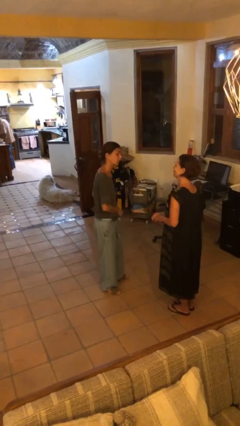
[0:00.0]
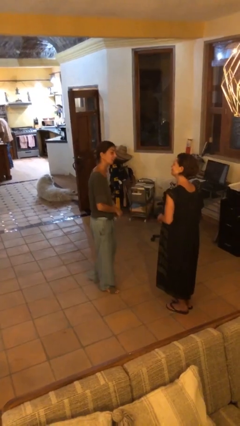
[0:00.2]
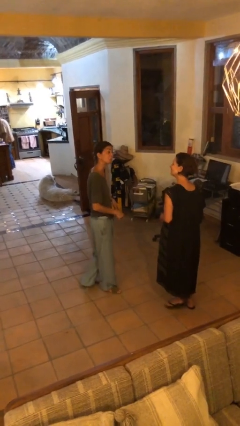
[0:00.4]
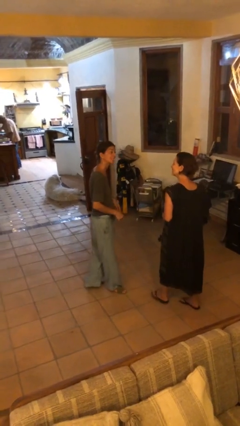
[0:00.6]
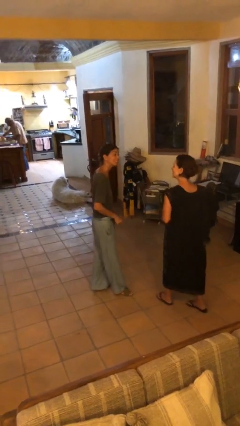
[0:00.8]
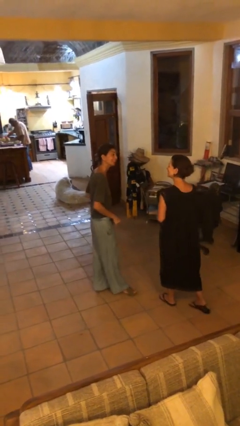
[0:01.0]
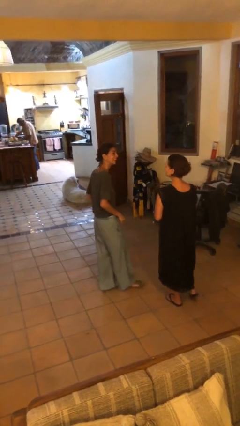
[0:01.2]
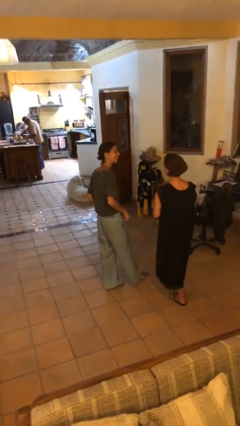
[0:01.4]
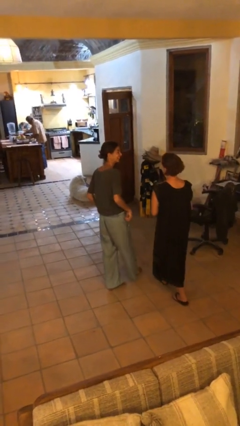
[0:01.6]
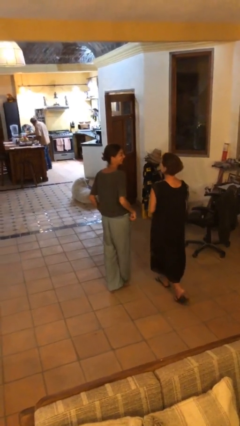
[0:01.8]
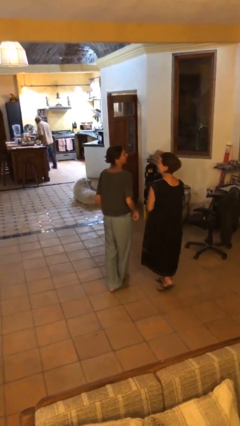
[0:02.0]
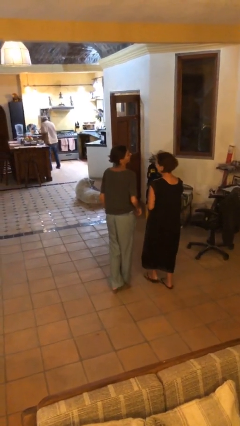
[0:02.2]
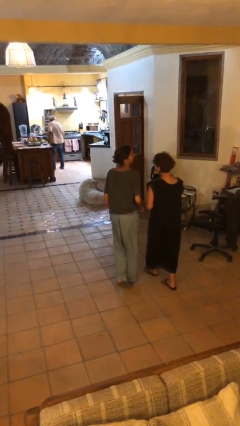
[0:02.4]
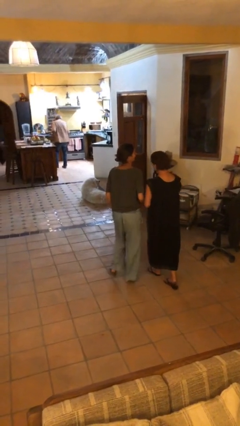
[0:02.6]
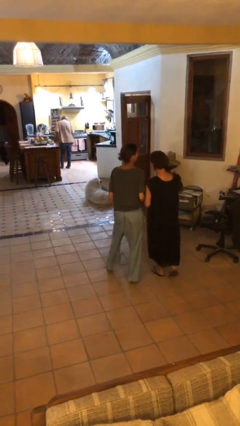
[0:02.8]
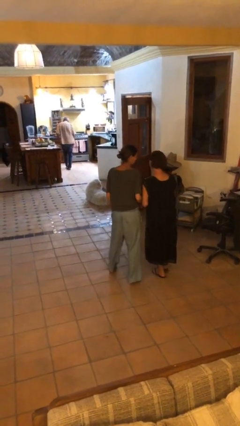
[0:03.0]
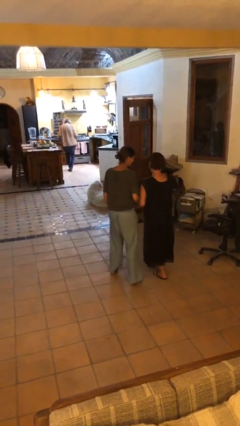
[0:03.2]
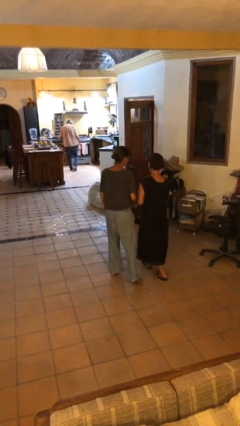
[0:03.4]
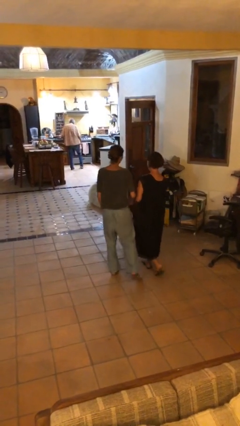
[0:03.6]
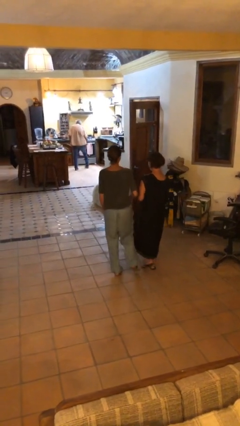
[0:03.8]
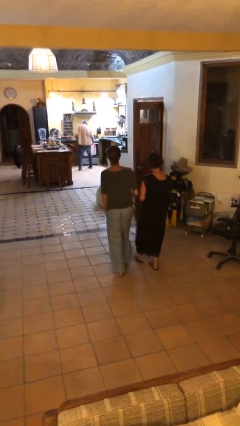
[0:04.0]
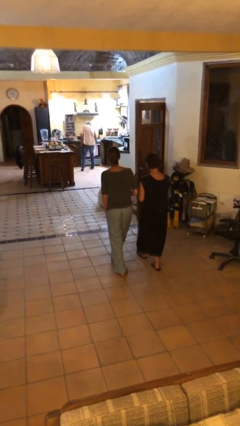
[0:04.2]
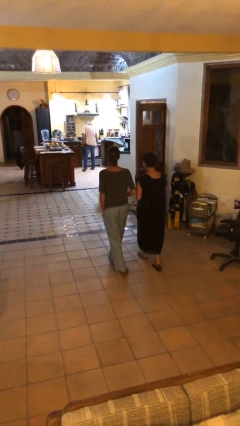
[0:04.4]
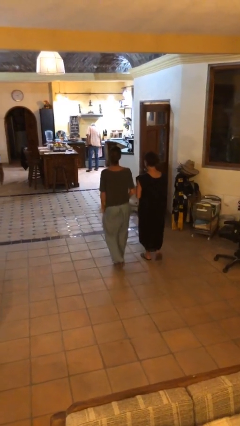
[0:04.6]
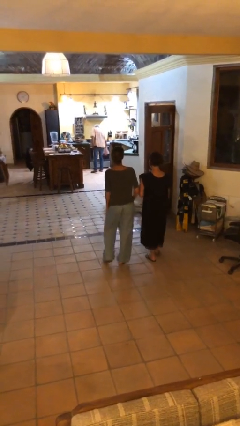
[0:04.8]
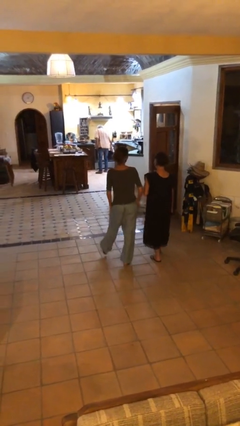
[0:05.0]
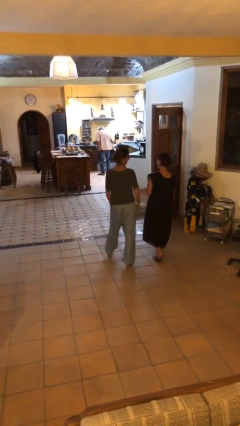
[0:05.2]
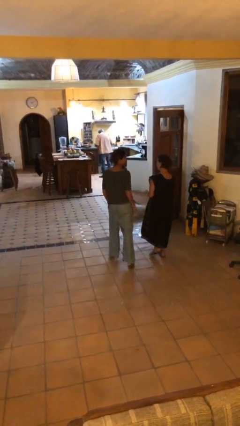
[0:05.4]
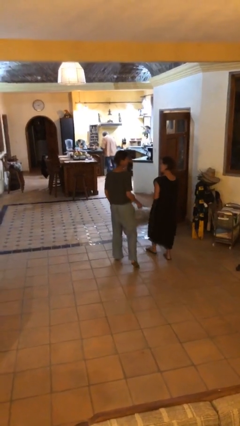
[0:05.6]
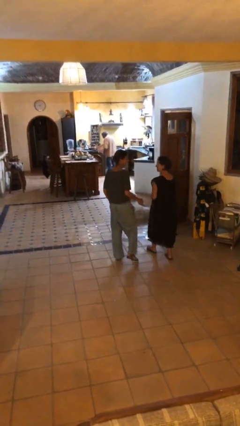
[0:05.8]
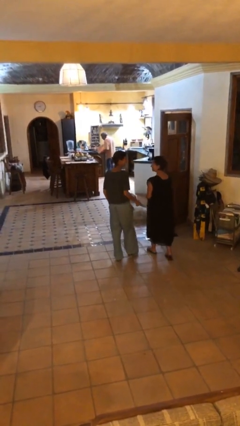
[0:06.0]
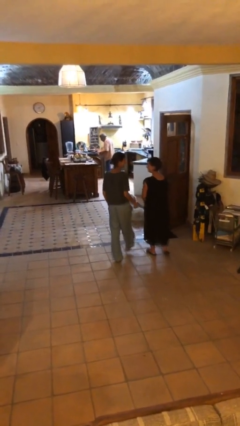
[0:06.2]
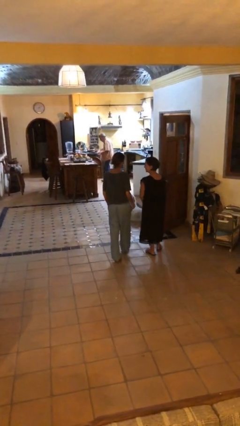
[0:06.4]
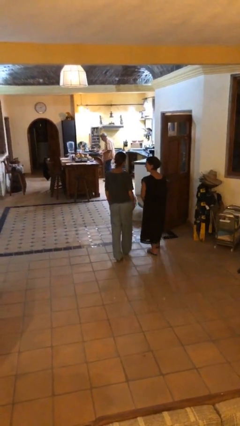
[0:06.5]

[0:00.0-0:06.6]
person talks to person

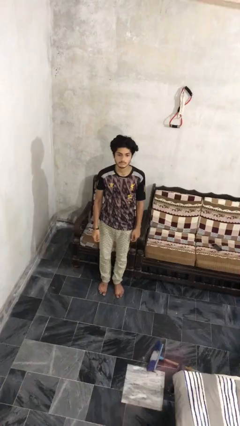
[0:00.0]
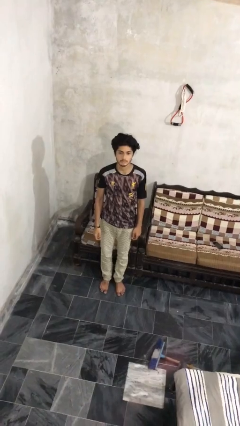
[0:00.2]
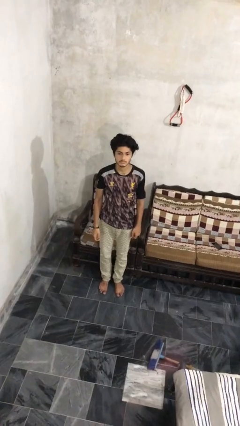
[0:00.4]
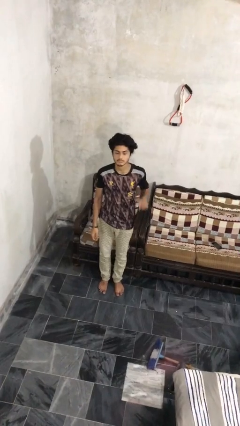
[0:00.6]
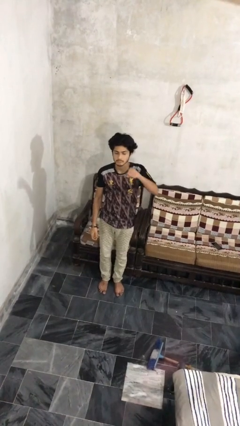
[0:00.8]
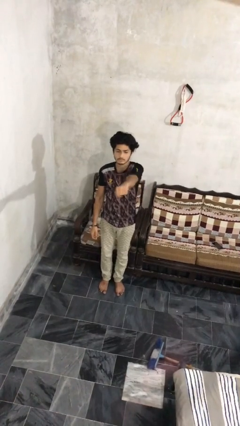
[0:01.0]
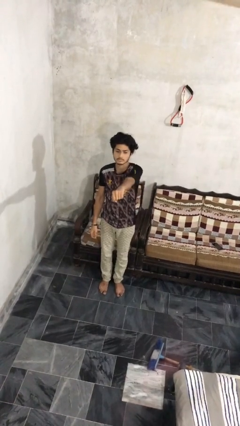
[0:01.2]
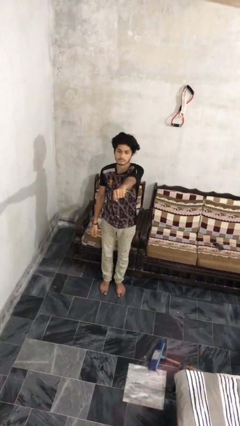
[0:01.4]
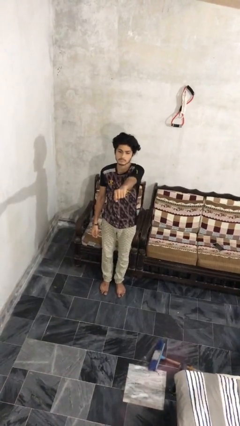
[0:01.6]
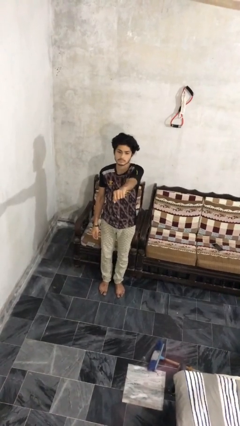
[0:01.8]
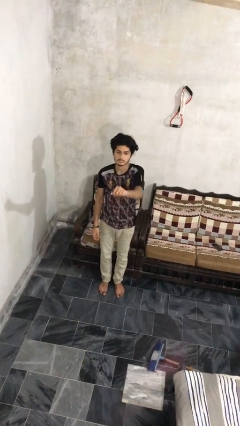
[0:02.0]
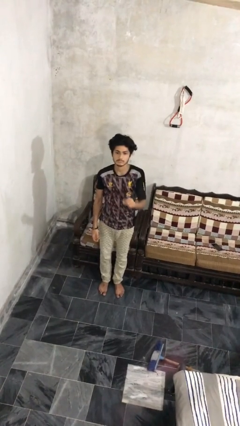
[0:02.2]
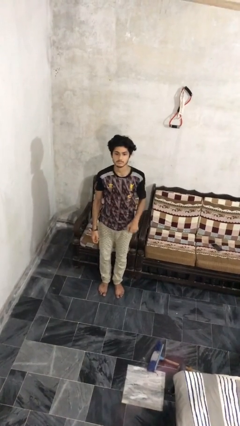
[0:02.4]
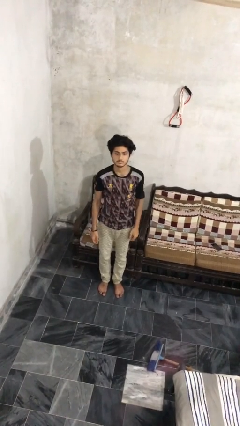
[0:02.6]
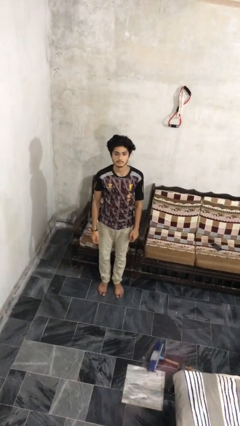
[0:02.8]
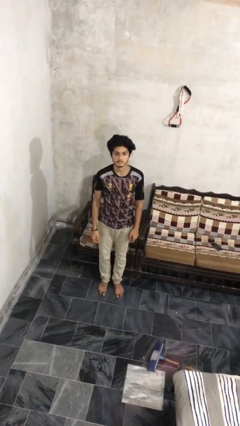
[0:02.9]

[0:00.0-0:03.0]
person punches

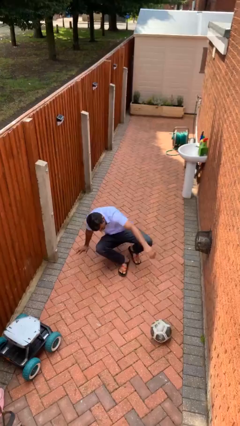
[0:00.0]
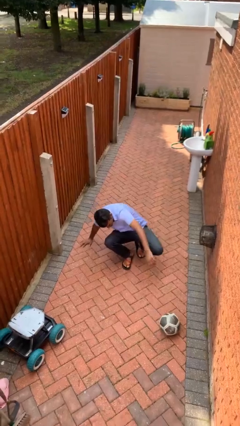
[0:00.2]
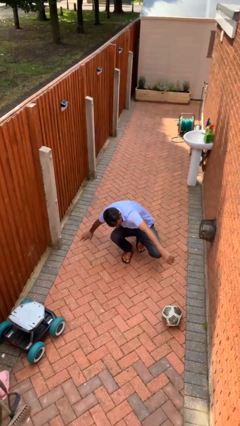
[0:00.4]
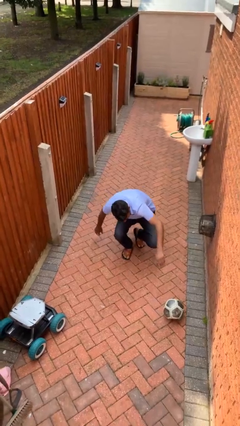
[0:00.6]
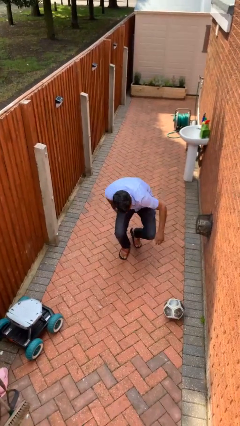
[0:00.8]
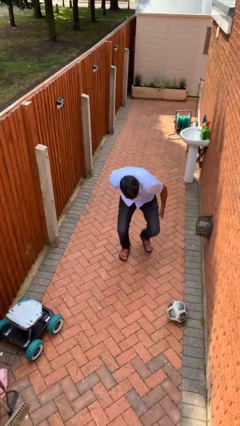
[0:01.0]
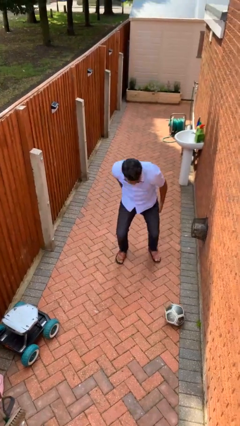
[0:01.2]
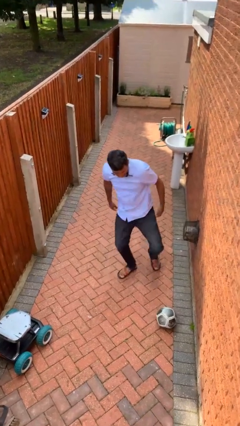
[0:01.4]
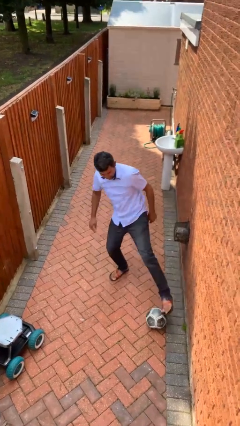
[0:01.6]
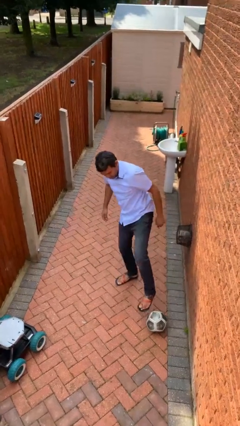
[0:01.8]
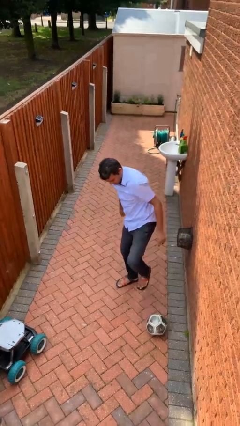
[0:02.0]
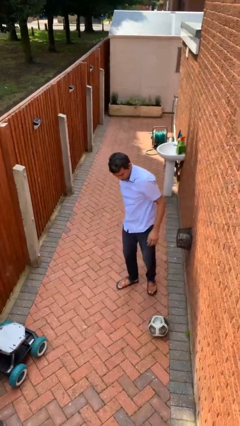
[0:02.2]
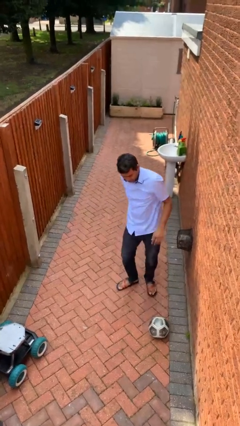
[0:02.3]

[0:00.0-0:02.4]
person stands up from floor

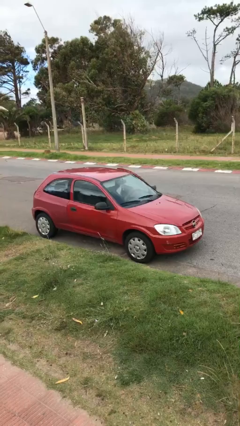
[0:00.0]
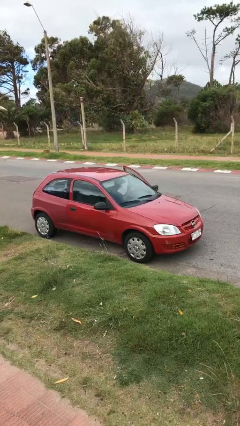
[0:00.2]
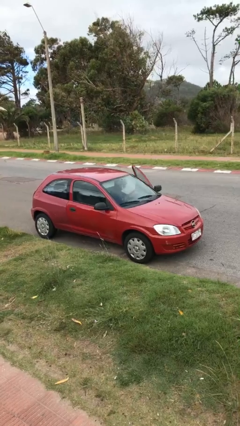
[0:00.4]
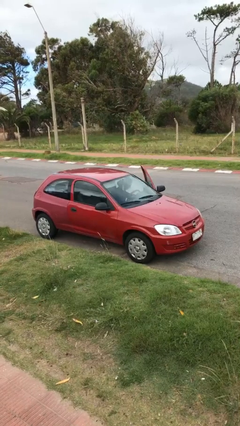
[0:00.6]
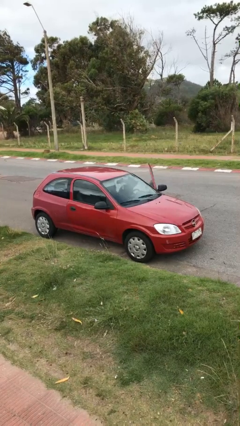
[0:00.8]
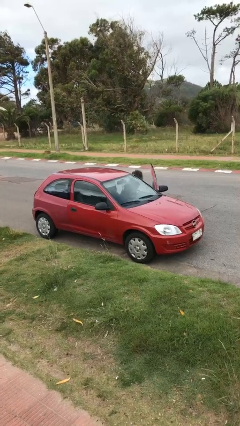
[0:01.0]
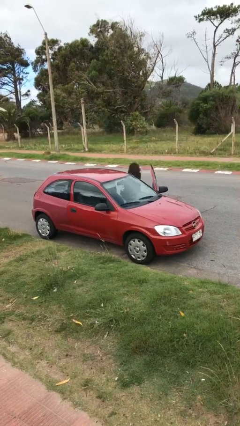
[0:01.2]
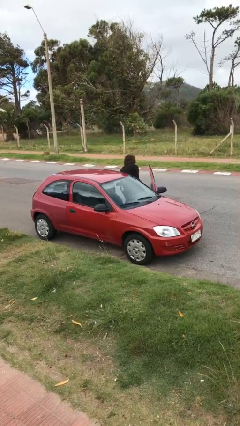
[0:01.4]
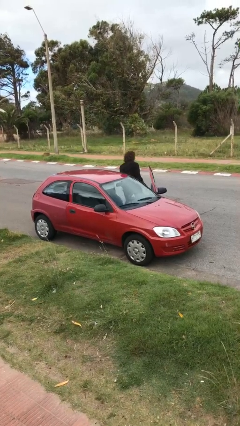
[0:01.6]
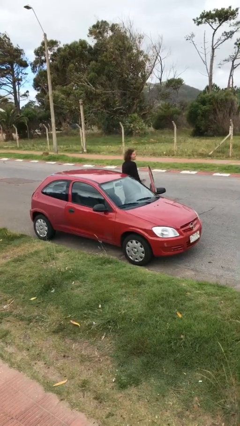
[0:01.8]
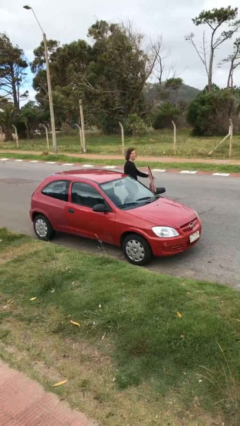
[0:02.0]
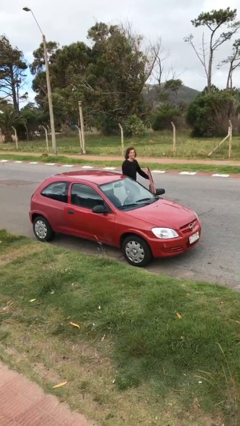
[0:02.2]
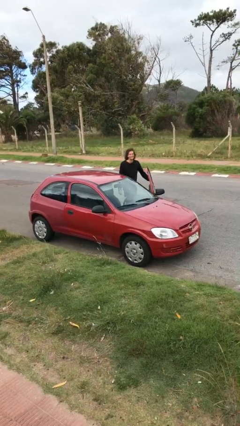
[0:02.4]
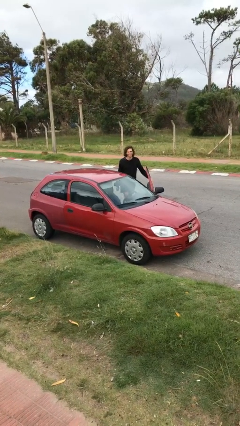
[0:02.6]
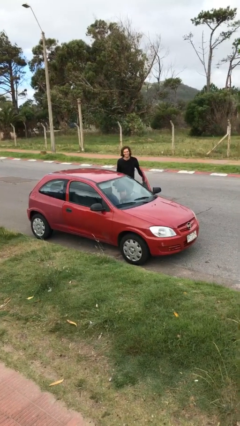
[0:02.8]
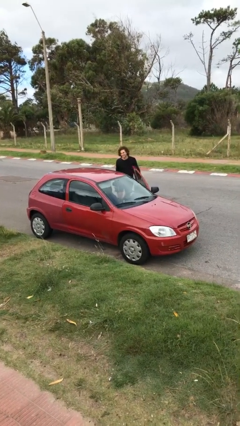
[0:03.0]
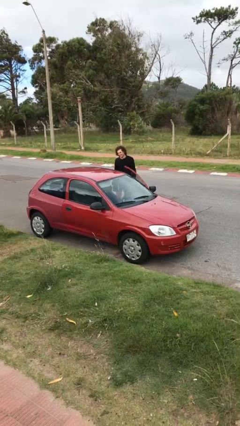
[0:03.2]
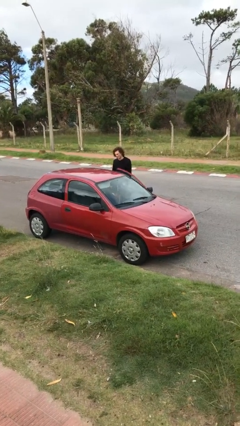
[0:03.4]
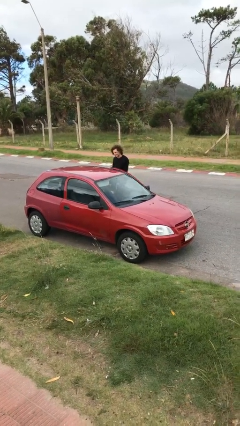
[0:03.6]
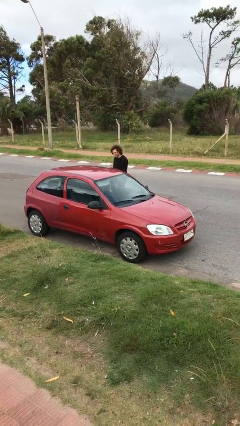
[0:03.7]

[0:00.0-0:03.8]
car drops off person

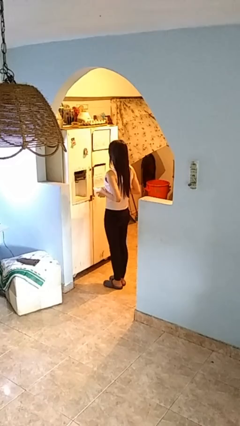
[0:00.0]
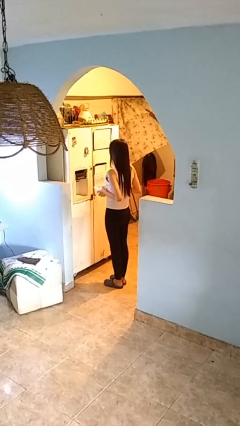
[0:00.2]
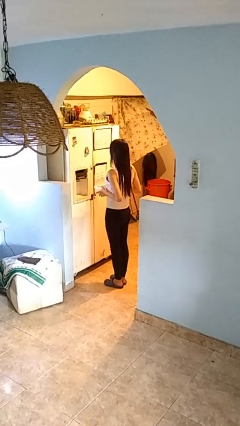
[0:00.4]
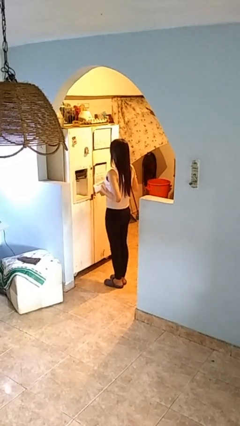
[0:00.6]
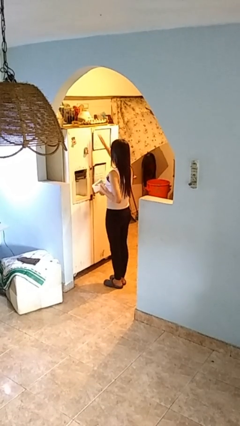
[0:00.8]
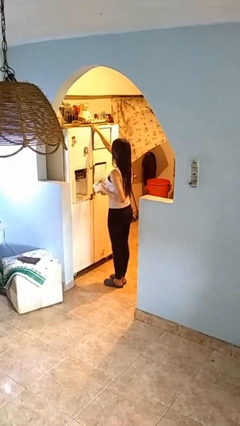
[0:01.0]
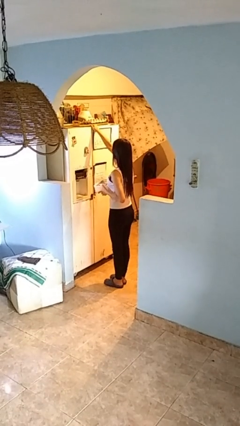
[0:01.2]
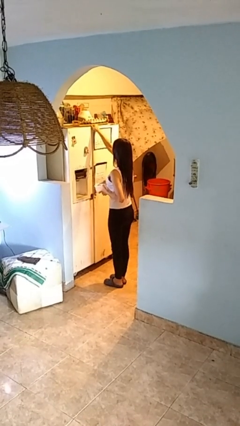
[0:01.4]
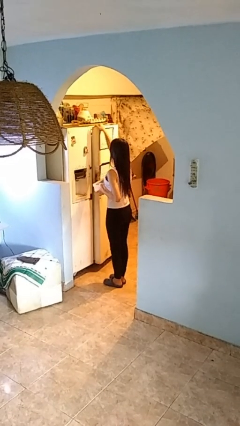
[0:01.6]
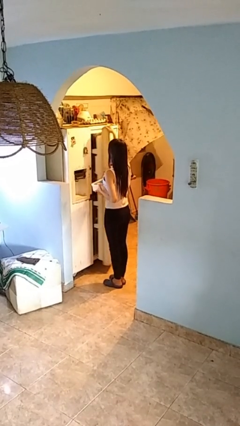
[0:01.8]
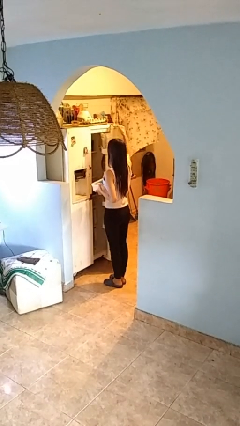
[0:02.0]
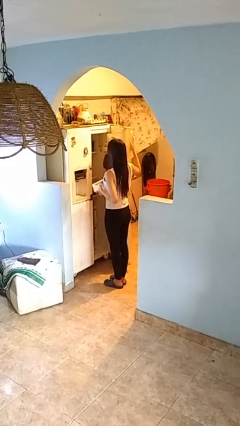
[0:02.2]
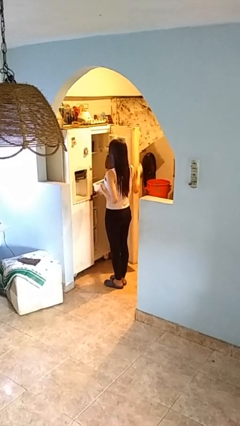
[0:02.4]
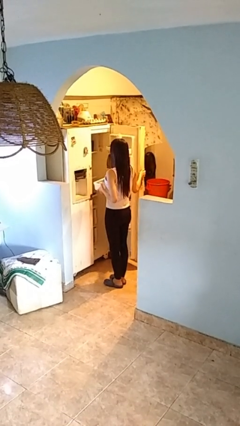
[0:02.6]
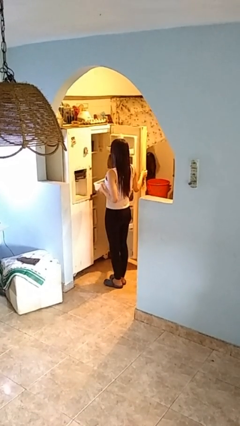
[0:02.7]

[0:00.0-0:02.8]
person opens refrigerator
